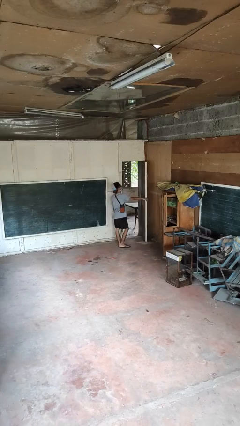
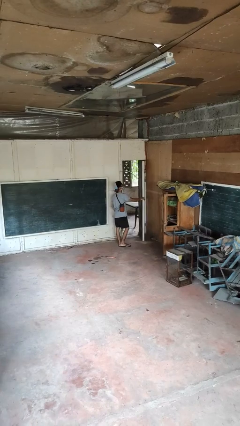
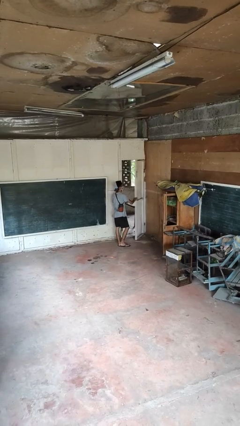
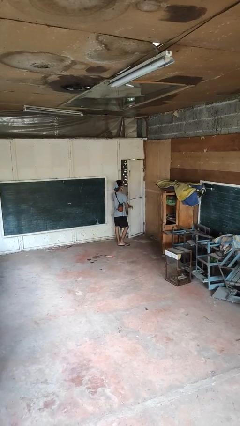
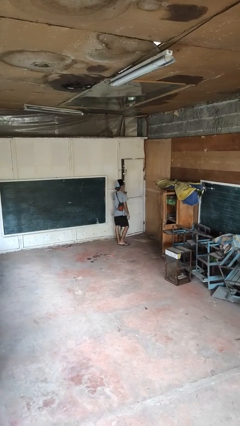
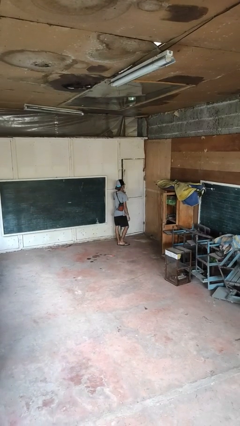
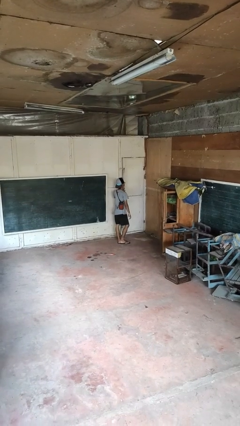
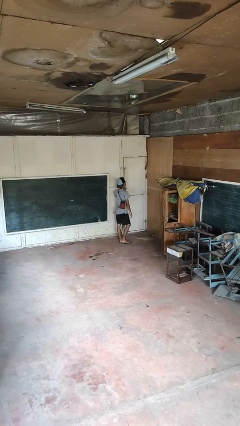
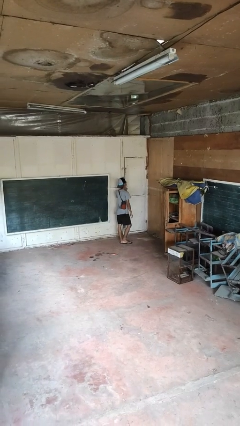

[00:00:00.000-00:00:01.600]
person closes facility door

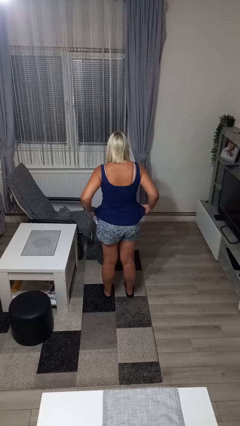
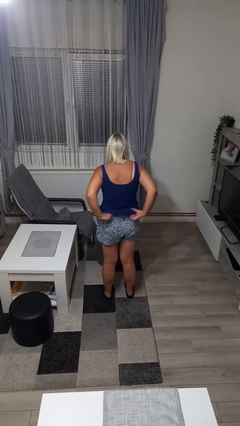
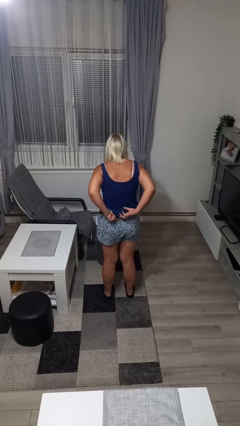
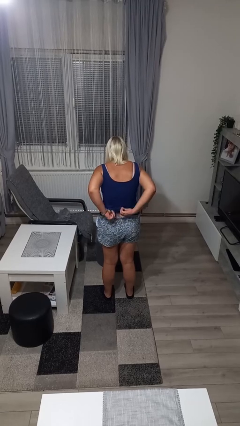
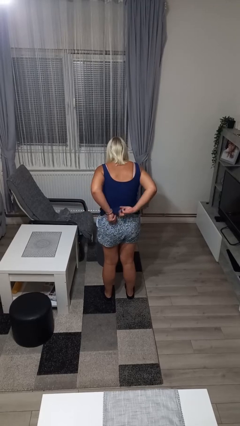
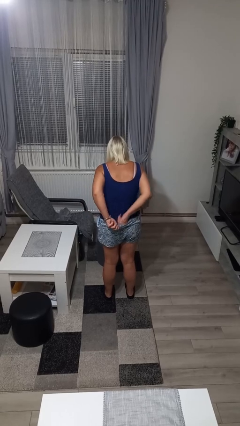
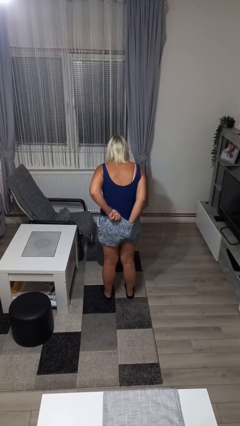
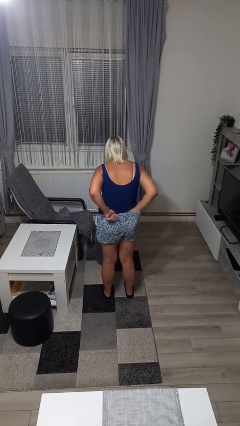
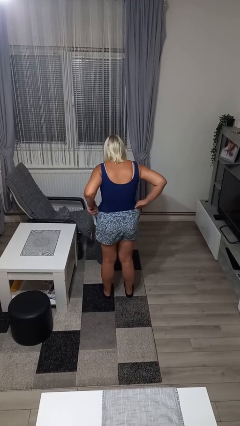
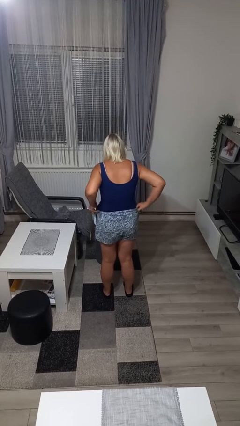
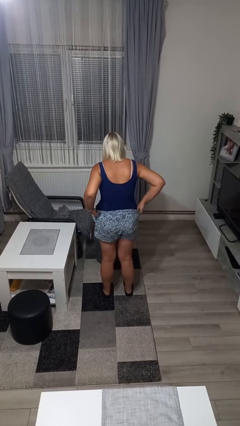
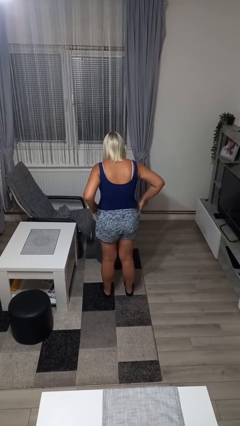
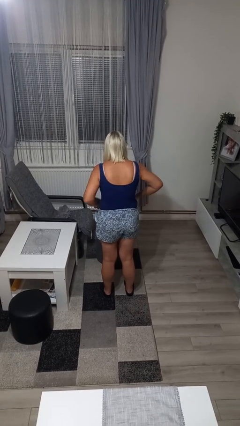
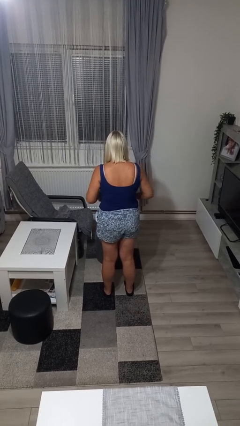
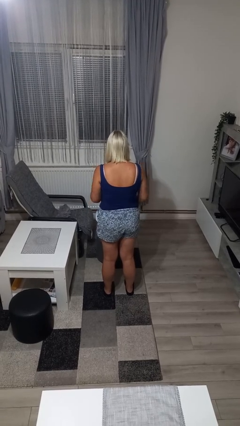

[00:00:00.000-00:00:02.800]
person tucks in shirt

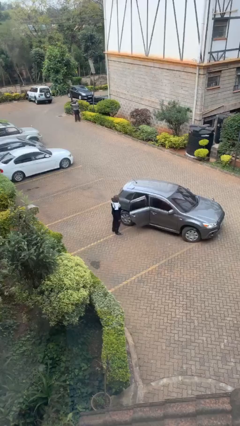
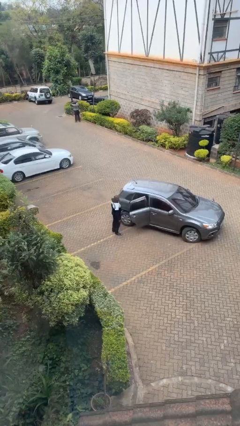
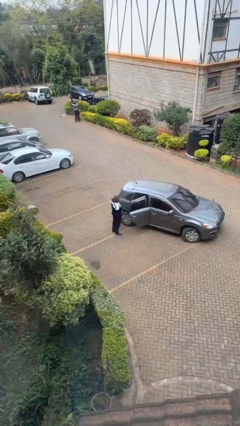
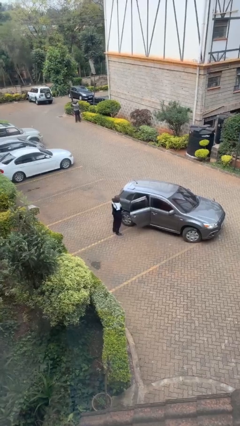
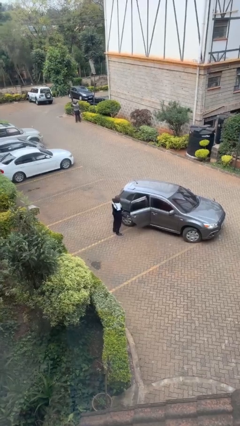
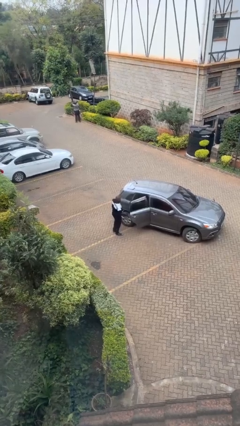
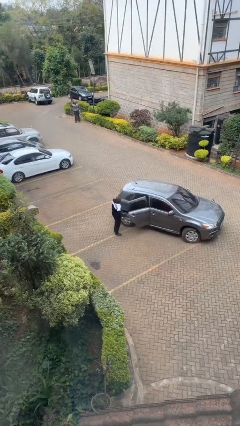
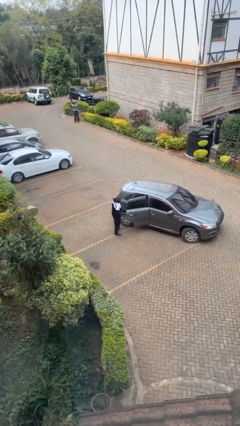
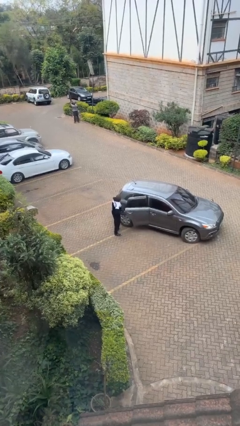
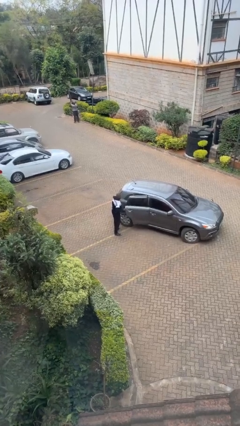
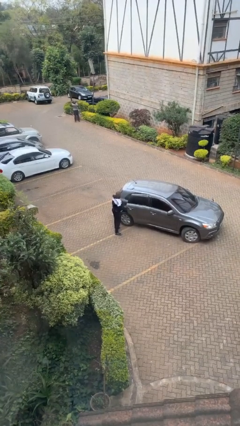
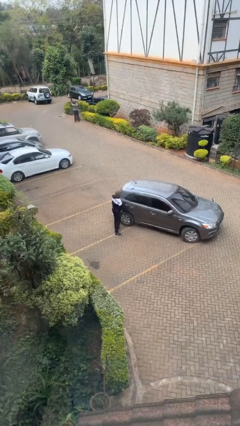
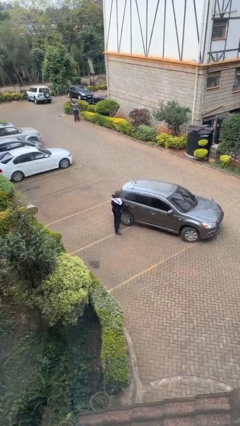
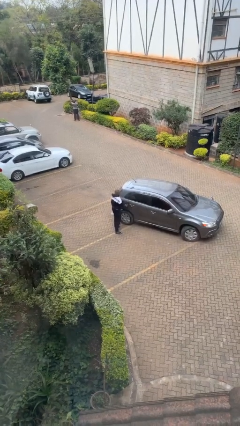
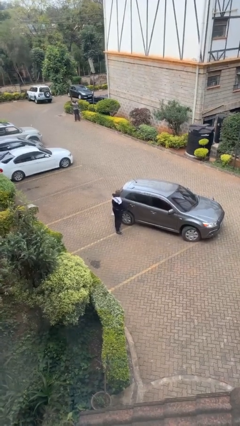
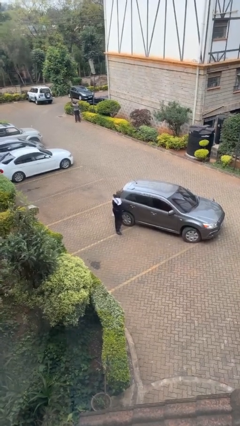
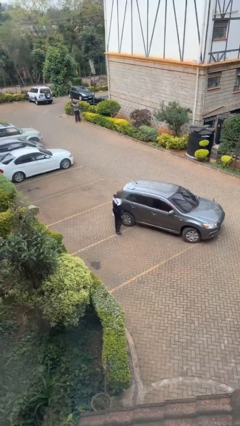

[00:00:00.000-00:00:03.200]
person closes car door

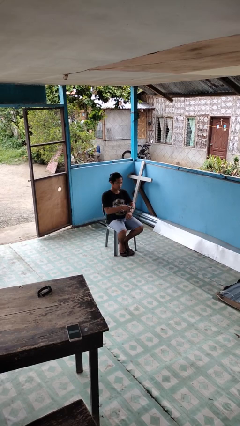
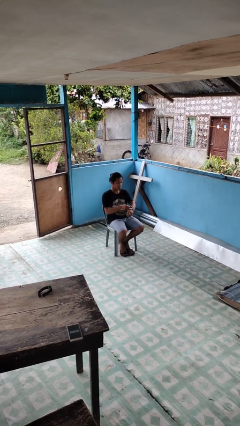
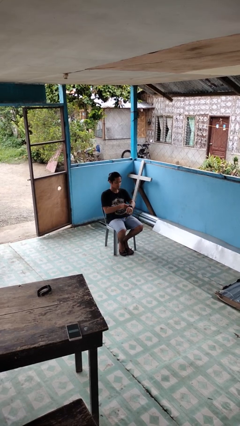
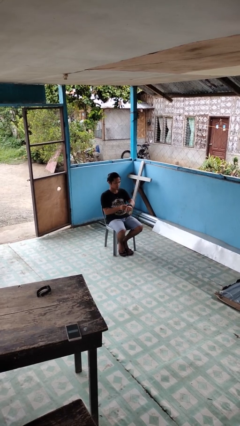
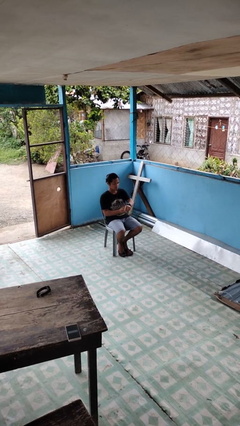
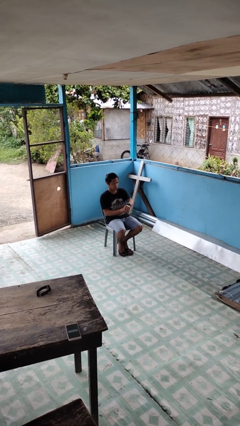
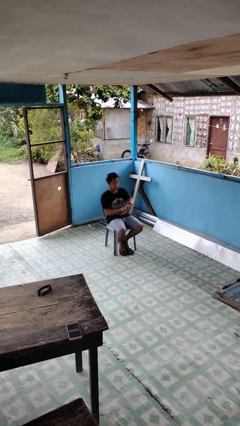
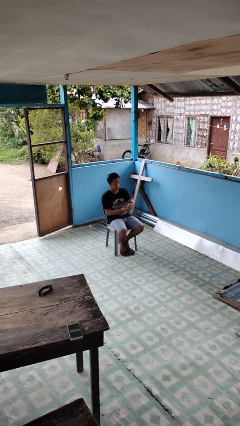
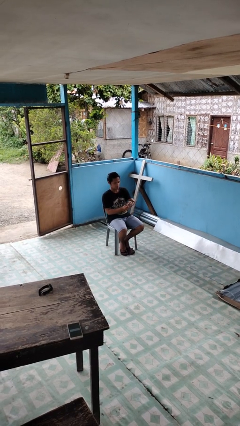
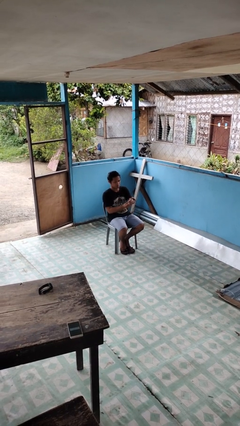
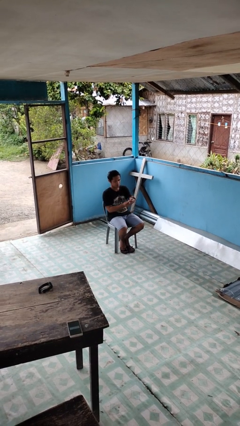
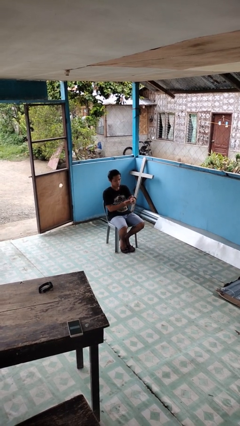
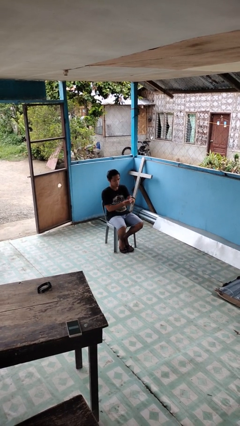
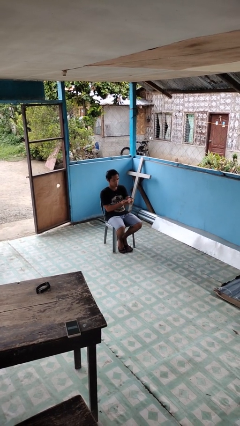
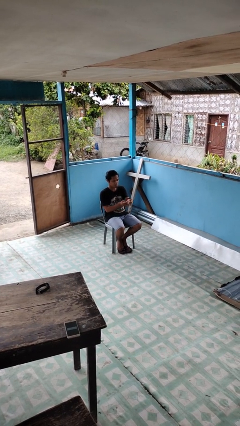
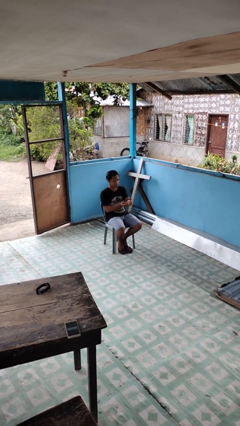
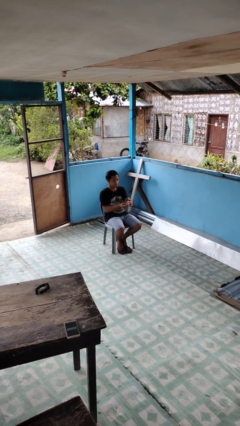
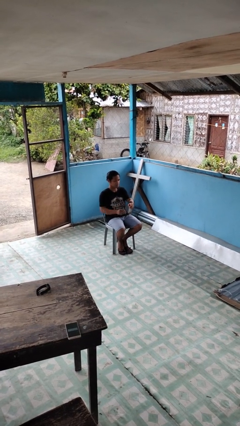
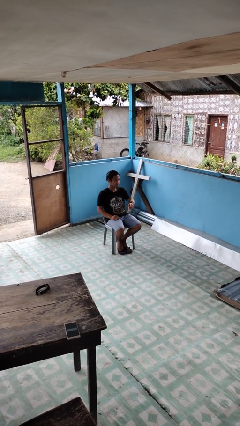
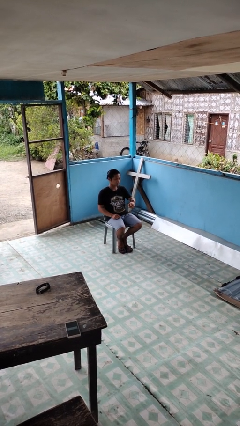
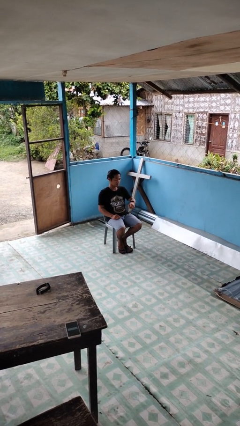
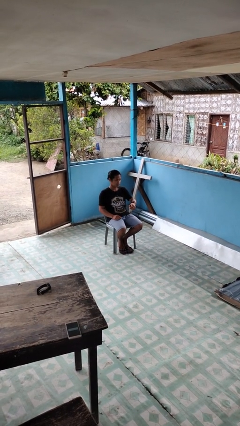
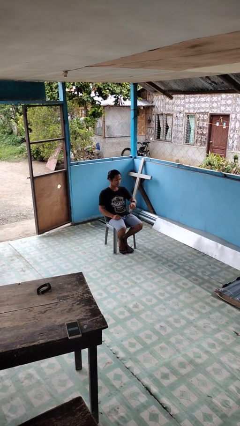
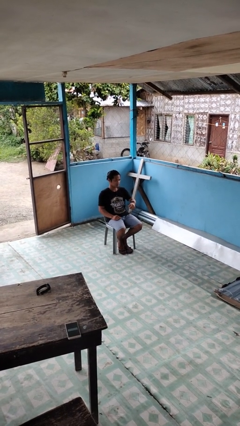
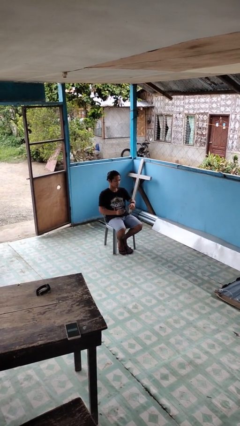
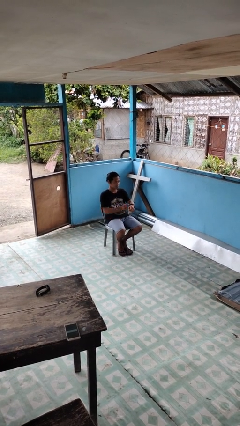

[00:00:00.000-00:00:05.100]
person puts on wristwatch

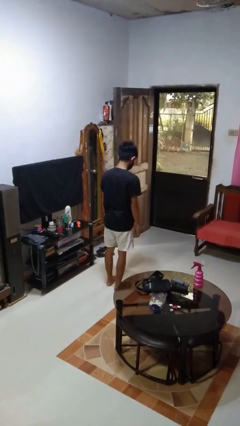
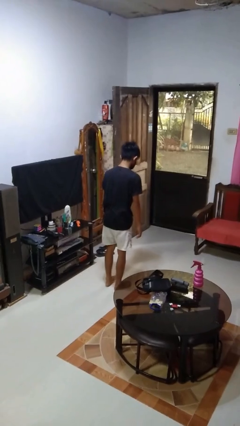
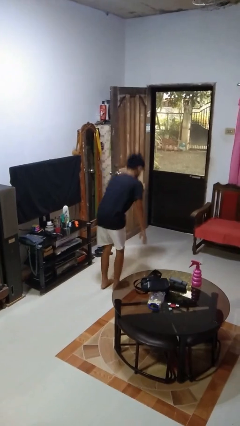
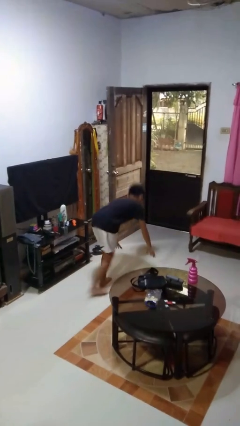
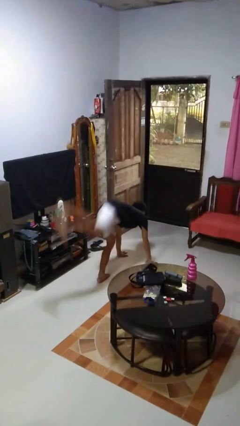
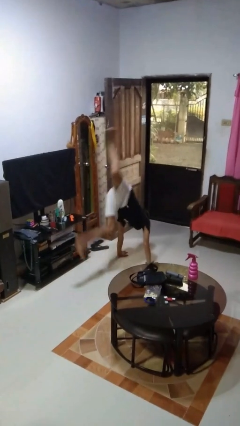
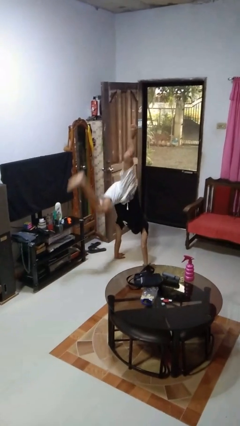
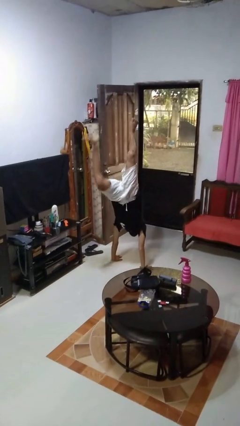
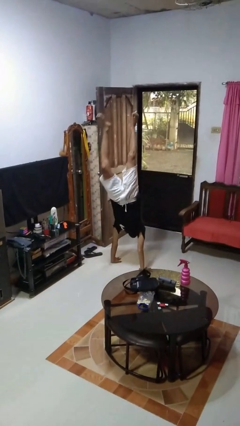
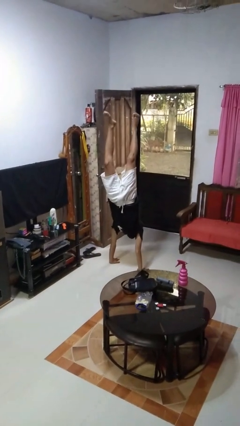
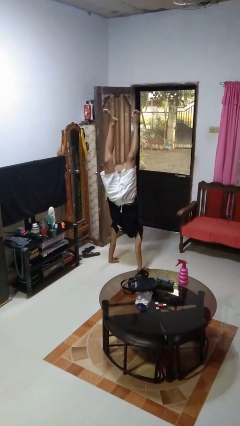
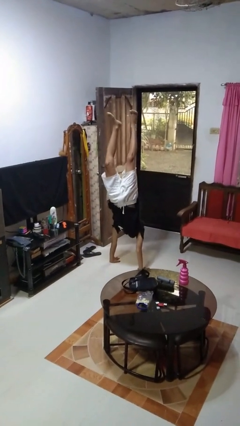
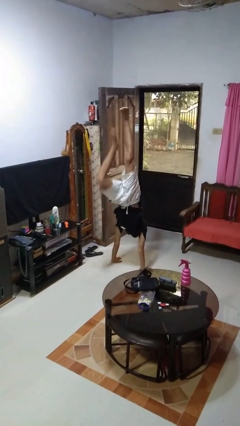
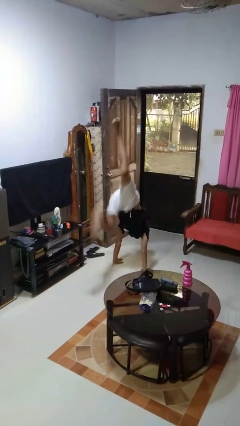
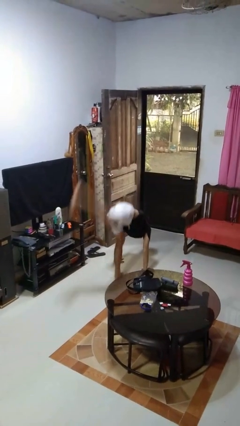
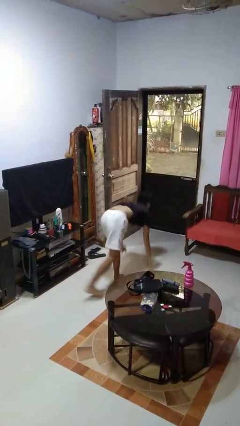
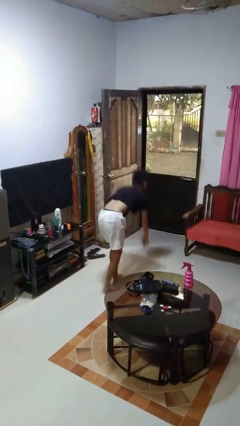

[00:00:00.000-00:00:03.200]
person handstand

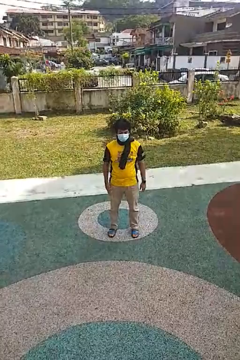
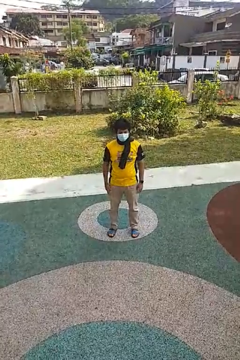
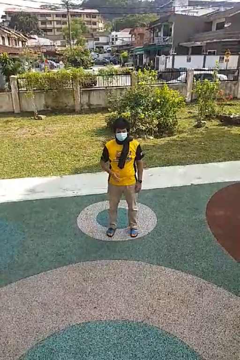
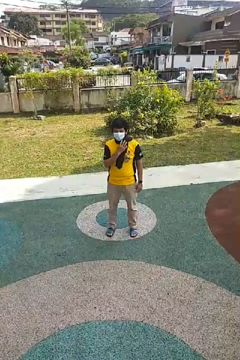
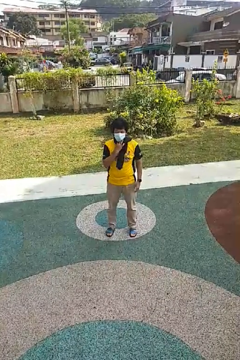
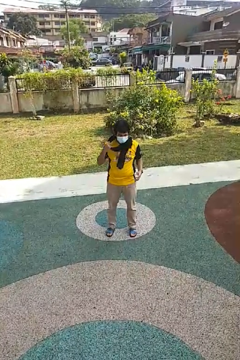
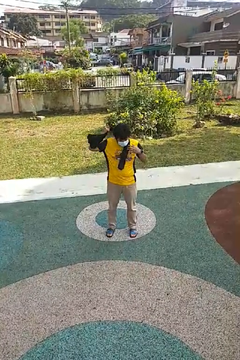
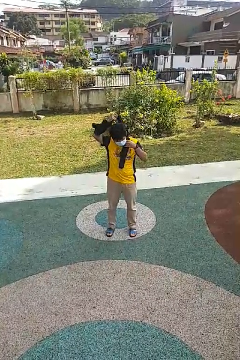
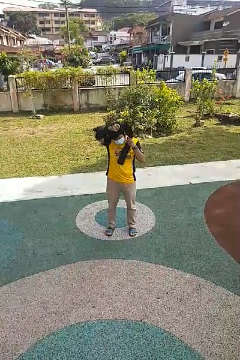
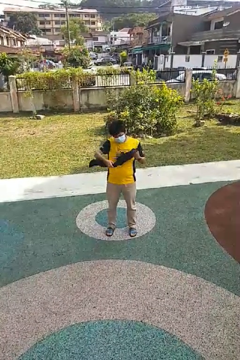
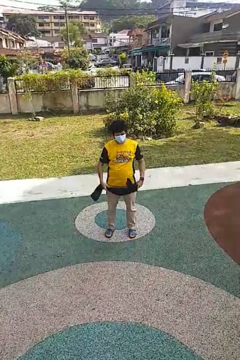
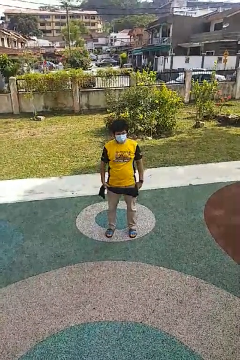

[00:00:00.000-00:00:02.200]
person takes off scarf

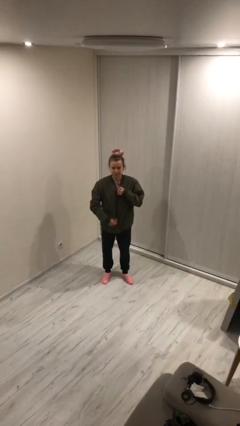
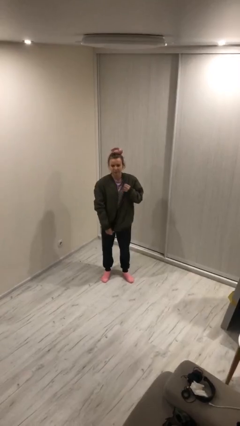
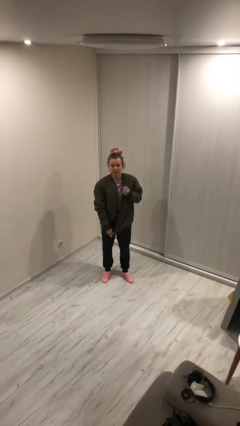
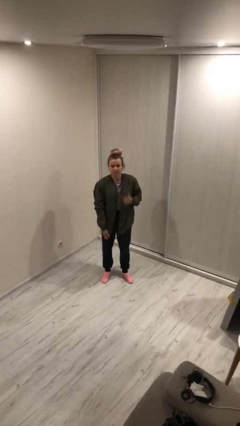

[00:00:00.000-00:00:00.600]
person unzips jacket
